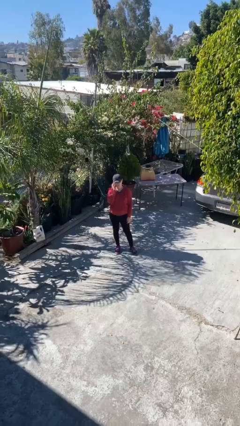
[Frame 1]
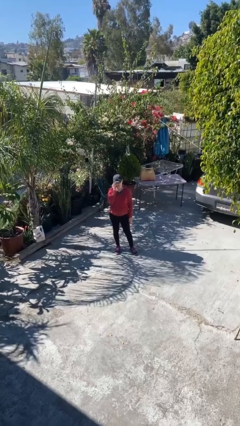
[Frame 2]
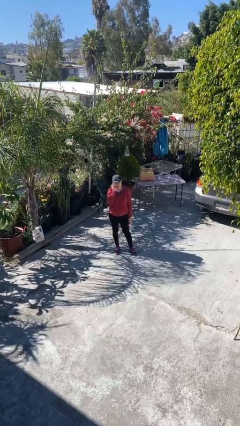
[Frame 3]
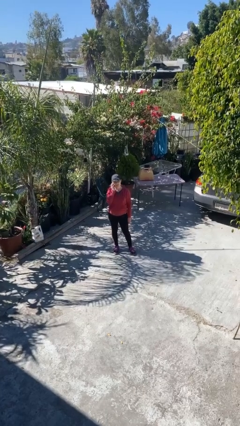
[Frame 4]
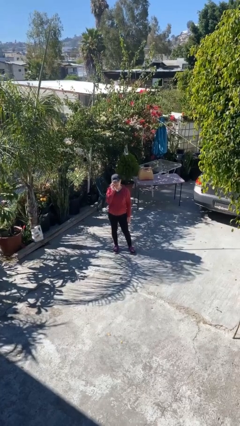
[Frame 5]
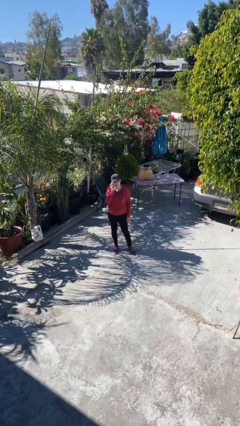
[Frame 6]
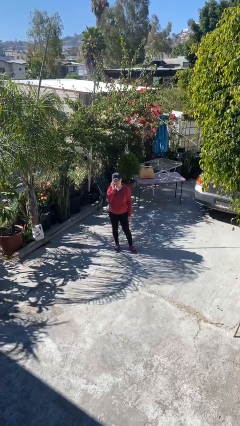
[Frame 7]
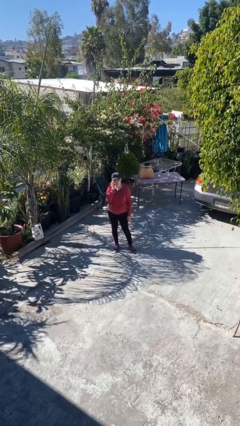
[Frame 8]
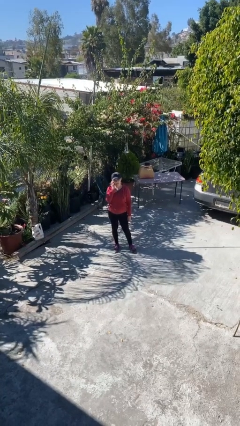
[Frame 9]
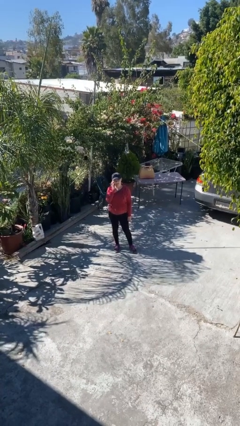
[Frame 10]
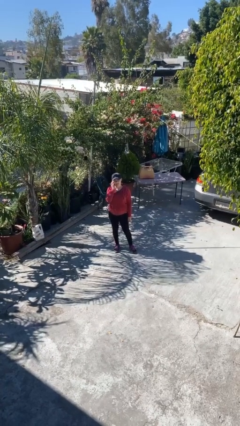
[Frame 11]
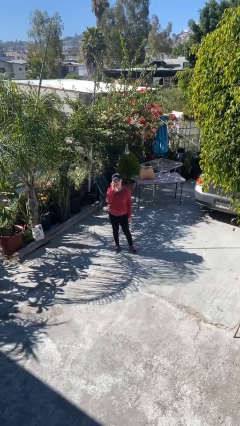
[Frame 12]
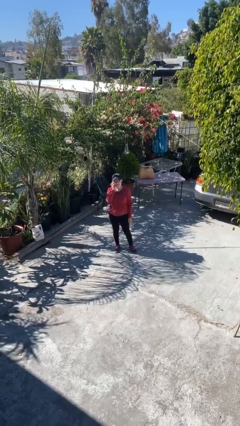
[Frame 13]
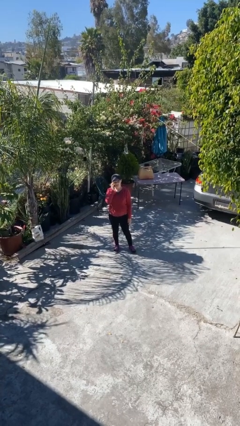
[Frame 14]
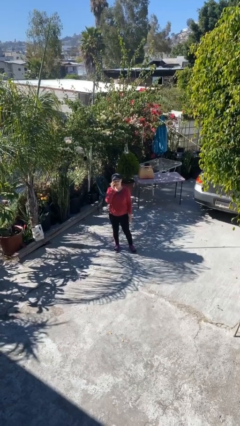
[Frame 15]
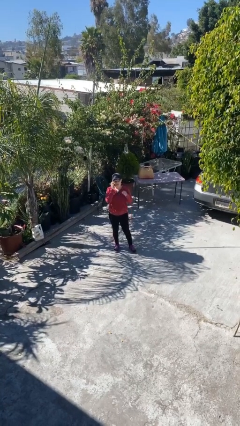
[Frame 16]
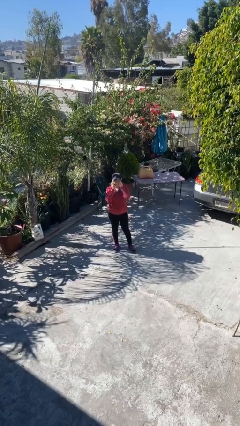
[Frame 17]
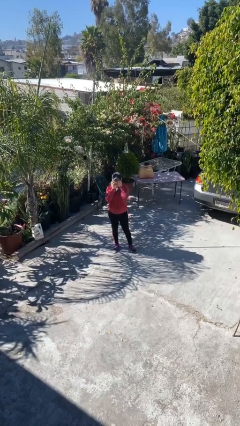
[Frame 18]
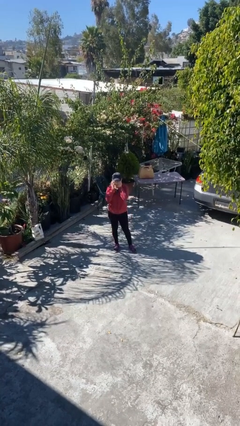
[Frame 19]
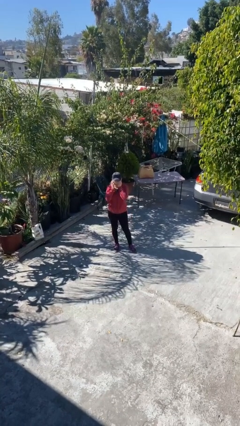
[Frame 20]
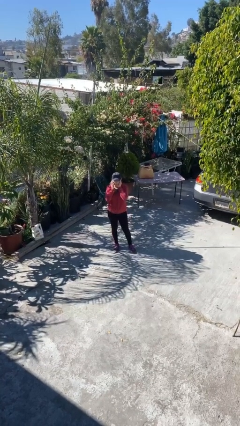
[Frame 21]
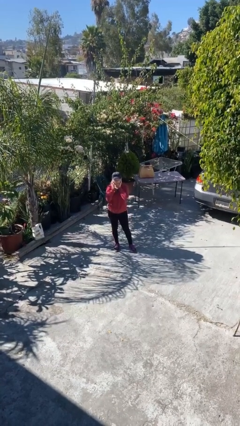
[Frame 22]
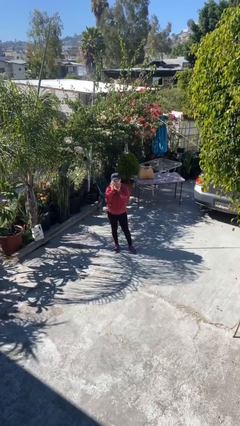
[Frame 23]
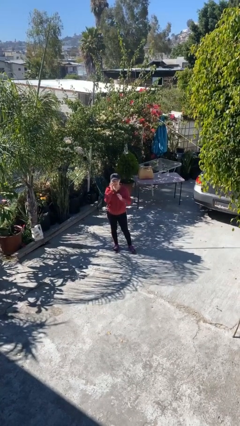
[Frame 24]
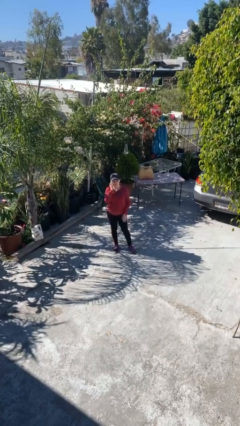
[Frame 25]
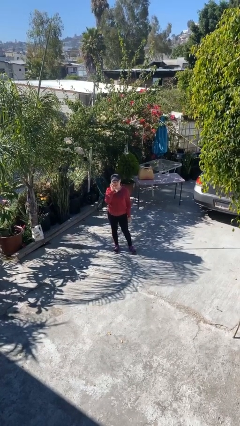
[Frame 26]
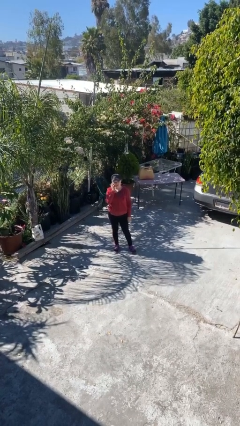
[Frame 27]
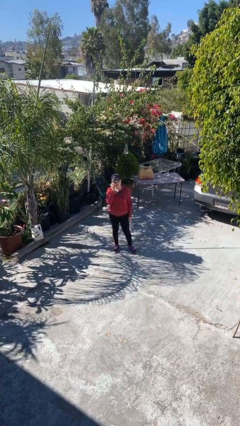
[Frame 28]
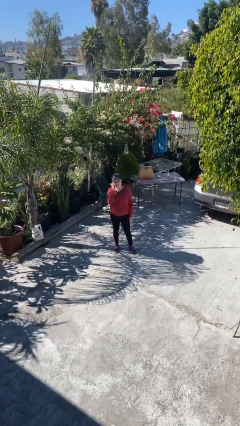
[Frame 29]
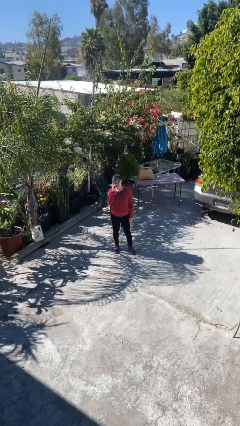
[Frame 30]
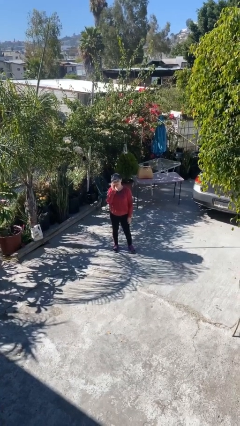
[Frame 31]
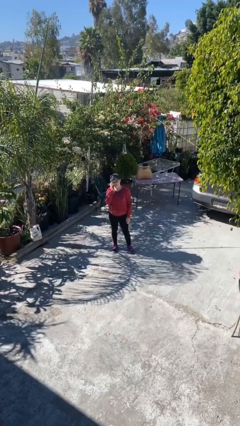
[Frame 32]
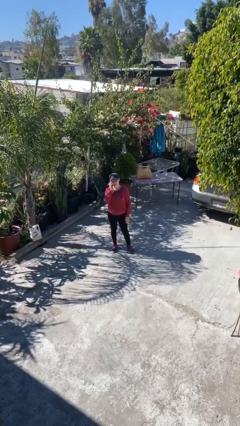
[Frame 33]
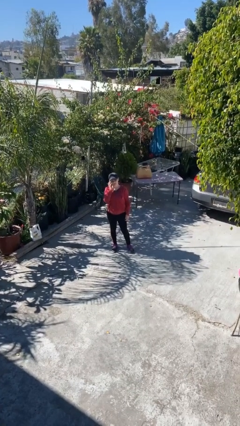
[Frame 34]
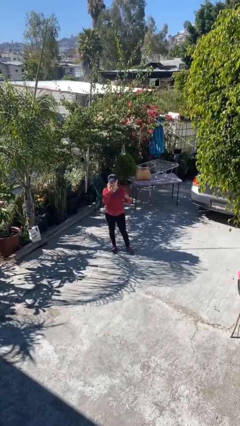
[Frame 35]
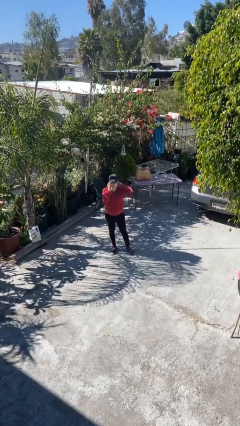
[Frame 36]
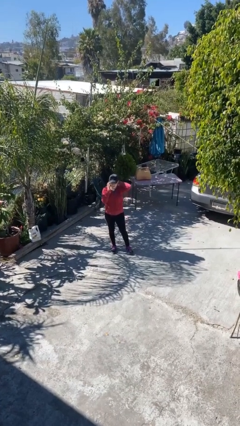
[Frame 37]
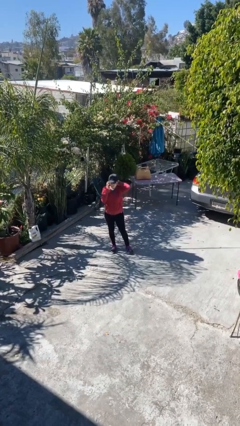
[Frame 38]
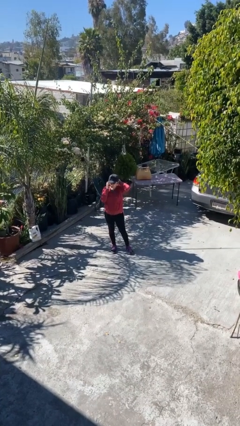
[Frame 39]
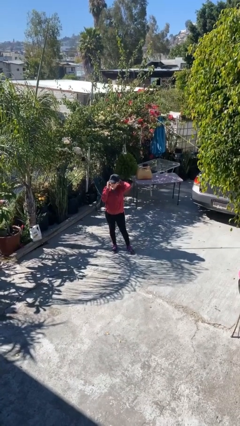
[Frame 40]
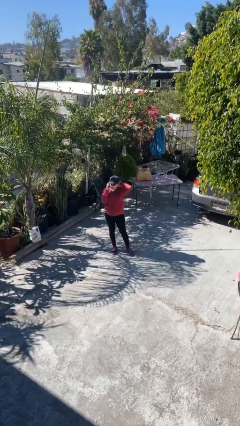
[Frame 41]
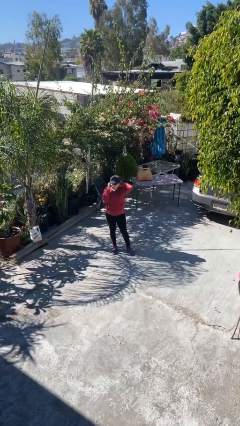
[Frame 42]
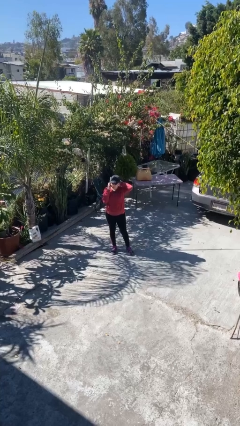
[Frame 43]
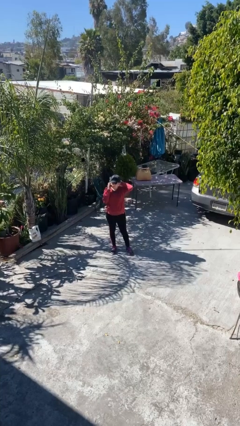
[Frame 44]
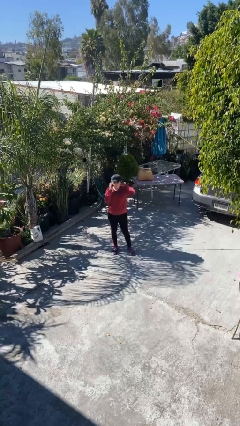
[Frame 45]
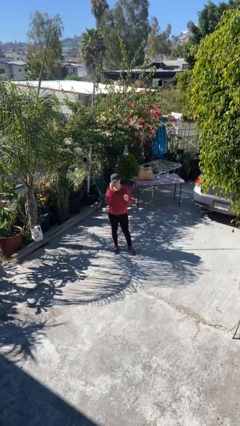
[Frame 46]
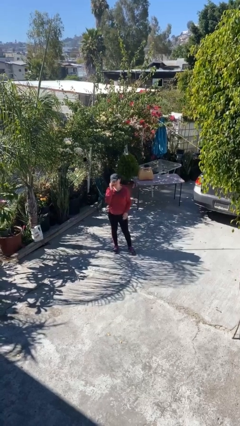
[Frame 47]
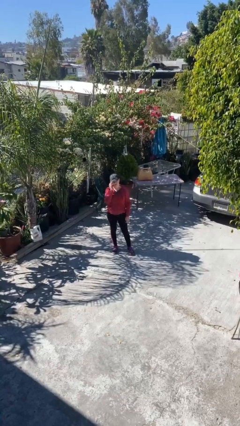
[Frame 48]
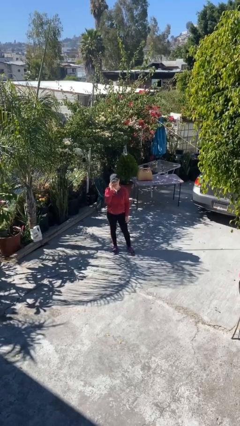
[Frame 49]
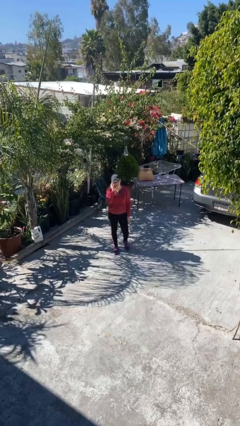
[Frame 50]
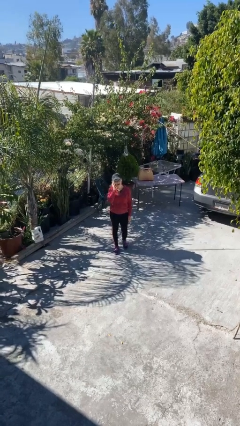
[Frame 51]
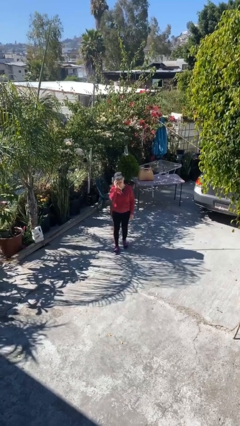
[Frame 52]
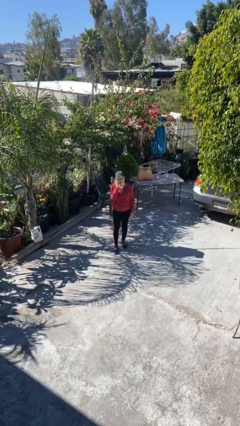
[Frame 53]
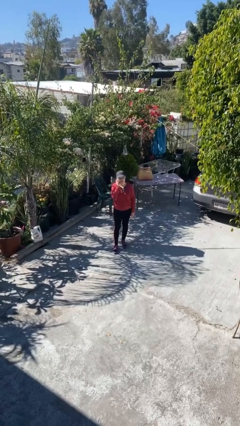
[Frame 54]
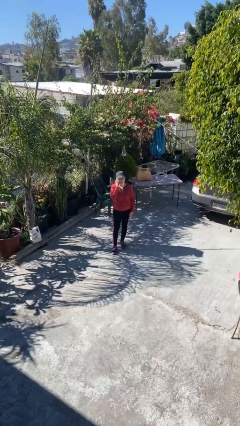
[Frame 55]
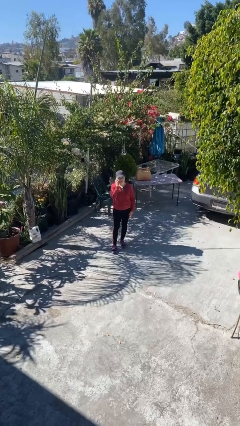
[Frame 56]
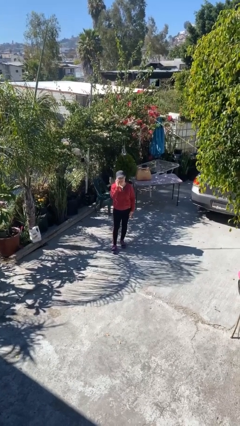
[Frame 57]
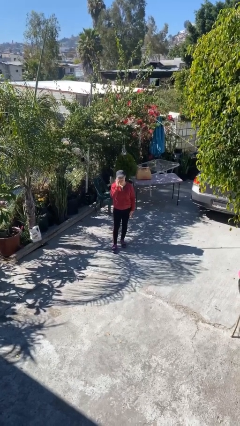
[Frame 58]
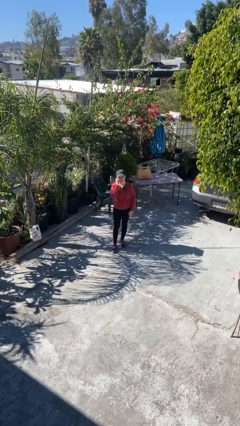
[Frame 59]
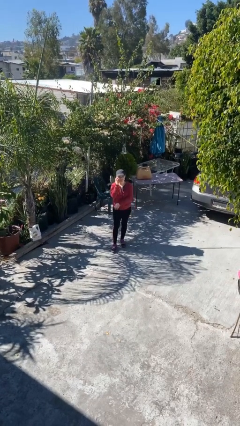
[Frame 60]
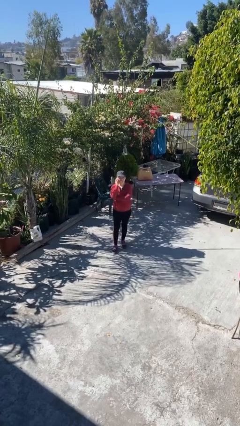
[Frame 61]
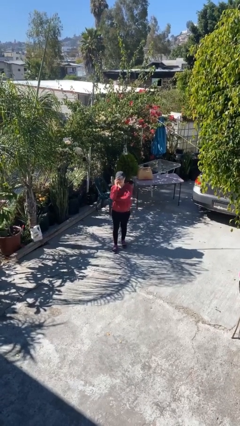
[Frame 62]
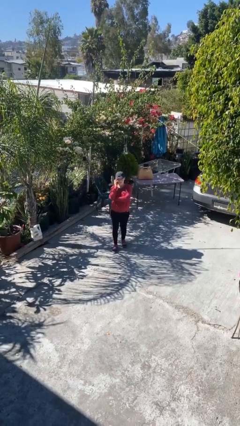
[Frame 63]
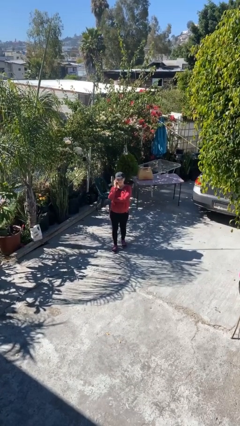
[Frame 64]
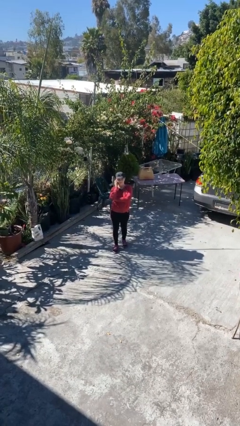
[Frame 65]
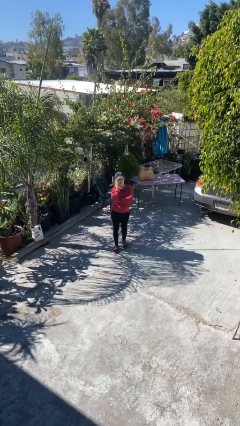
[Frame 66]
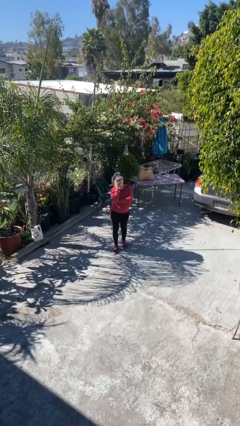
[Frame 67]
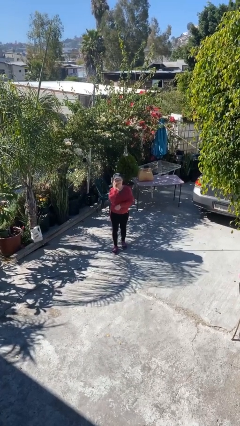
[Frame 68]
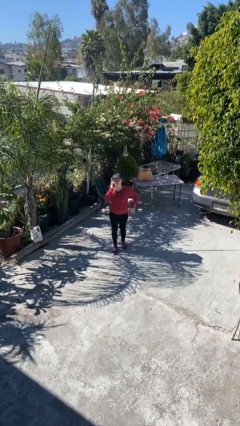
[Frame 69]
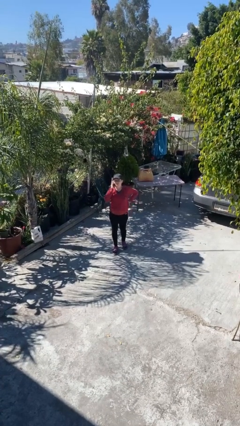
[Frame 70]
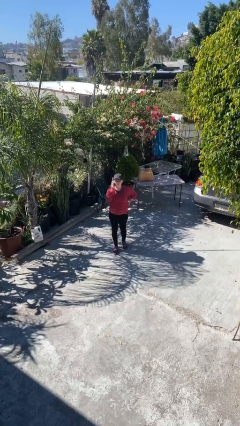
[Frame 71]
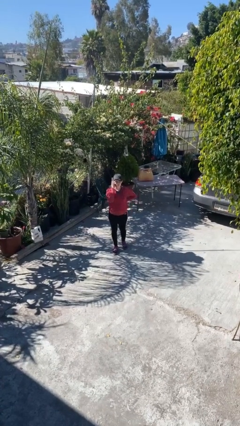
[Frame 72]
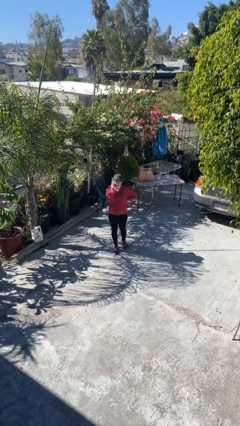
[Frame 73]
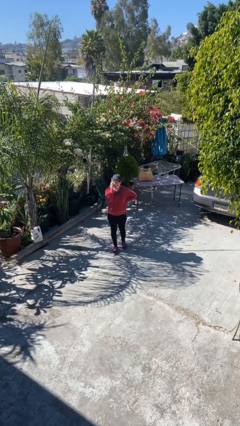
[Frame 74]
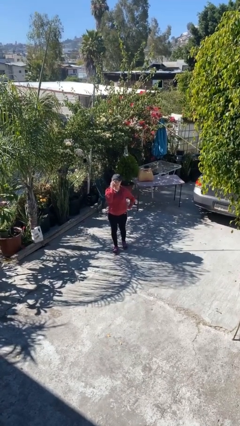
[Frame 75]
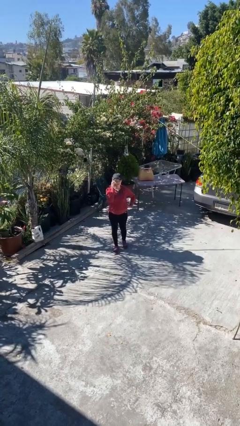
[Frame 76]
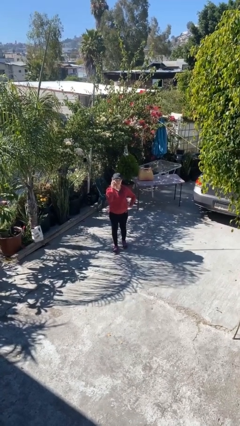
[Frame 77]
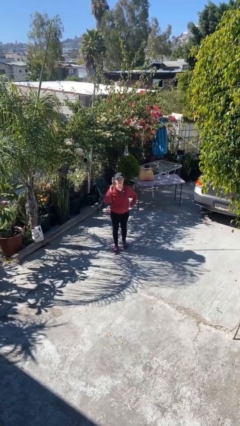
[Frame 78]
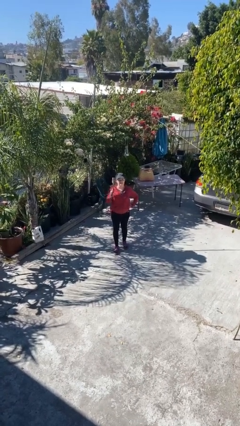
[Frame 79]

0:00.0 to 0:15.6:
person talks on phone

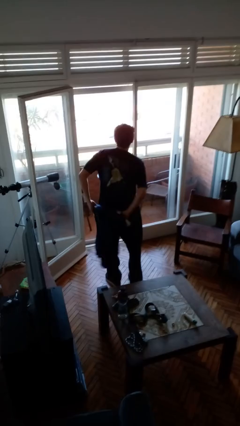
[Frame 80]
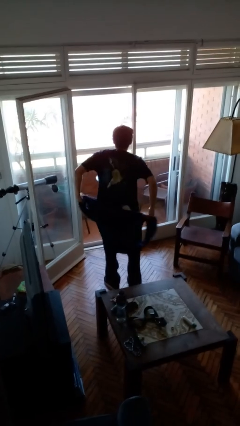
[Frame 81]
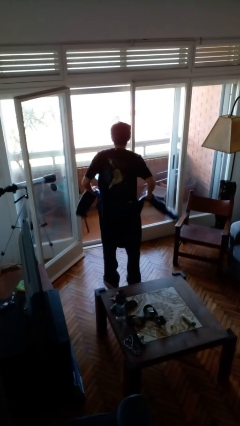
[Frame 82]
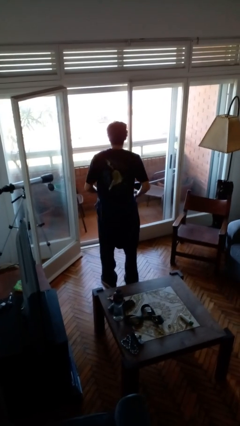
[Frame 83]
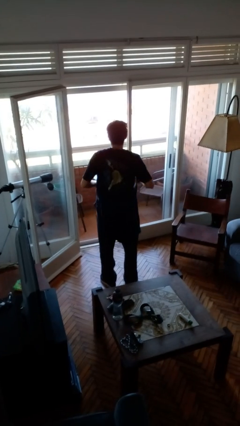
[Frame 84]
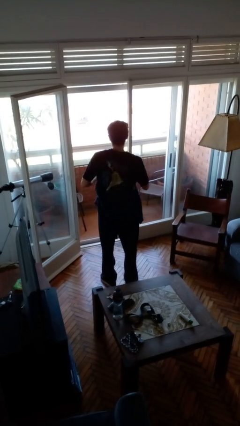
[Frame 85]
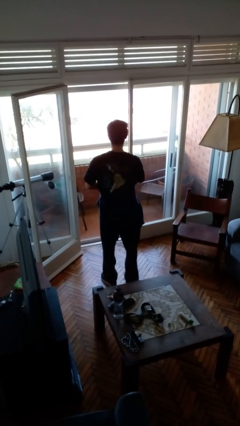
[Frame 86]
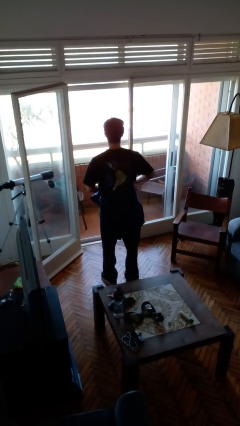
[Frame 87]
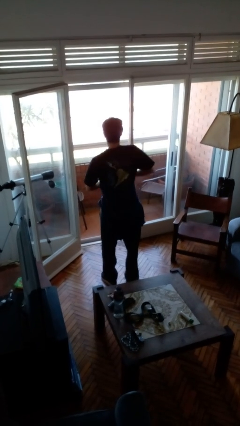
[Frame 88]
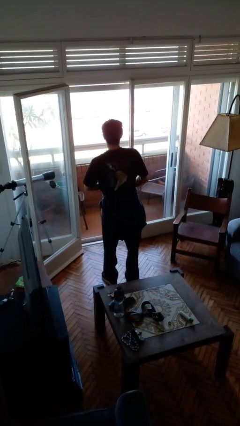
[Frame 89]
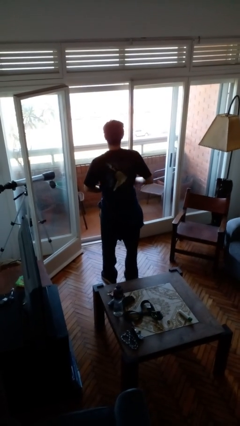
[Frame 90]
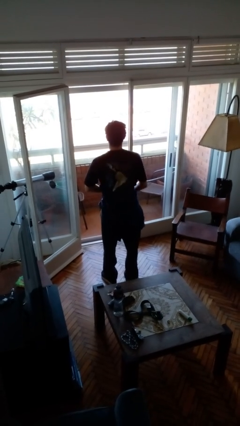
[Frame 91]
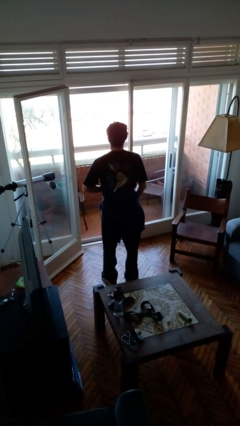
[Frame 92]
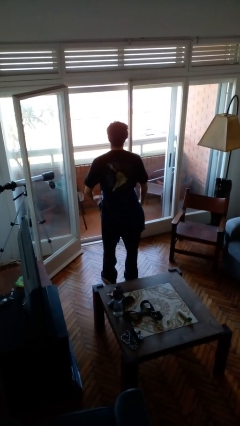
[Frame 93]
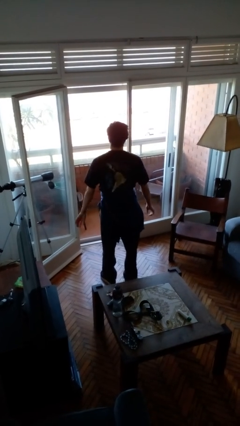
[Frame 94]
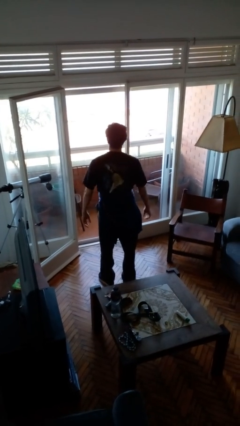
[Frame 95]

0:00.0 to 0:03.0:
person ties jacket around waist
